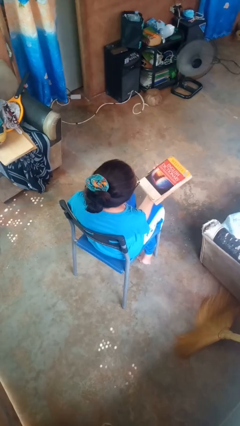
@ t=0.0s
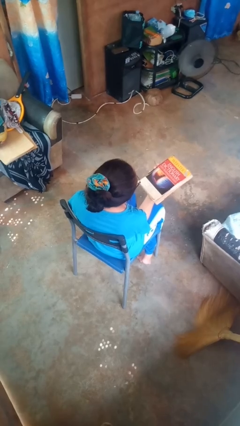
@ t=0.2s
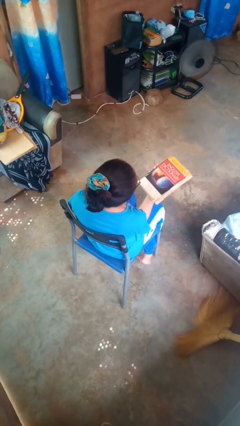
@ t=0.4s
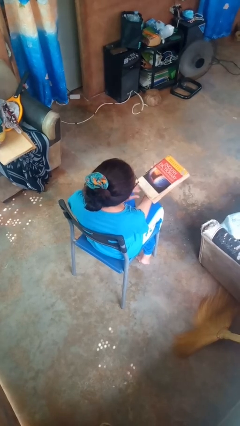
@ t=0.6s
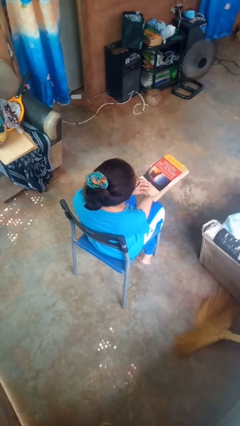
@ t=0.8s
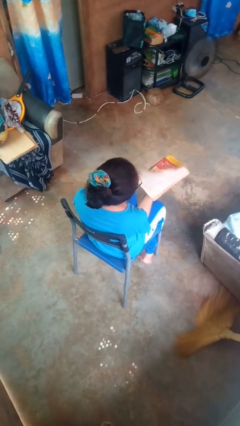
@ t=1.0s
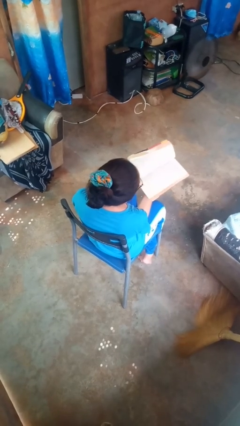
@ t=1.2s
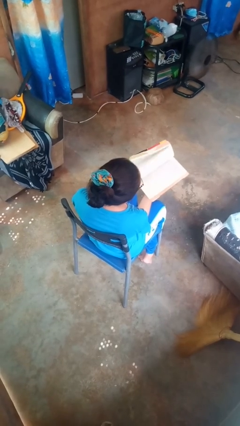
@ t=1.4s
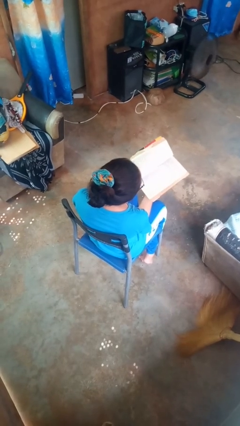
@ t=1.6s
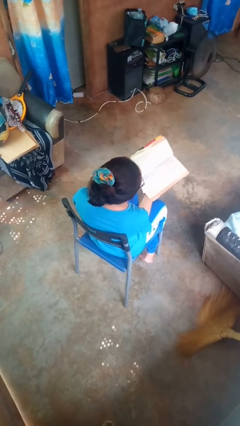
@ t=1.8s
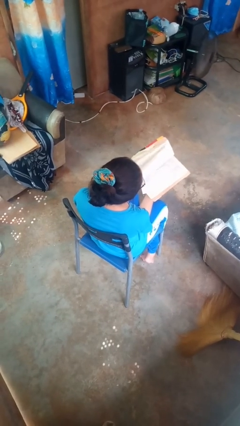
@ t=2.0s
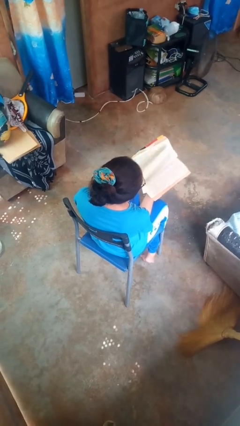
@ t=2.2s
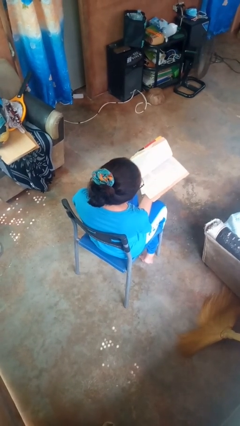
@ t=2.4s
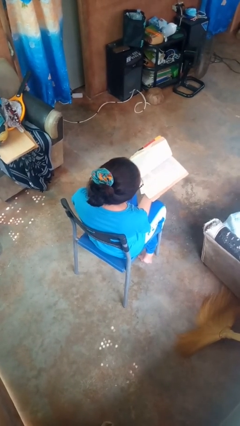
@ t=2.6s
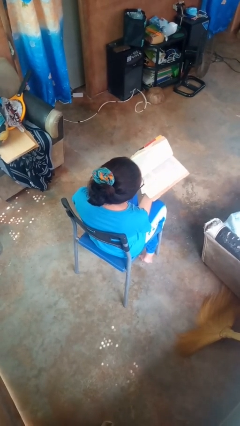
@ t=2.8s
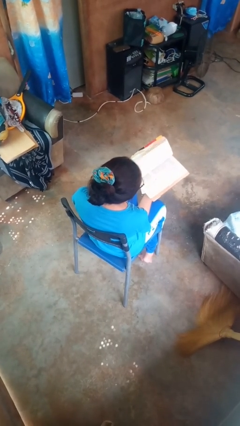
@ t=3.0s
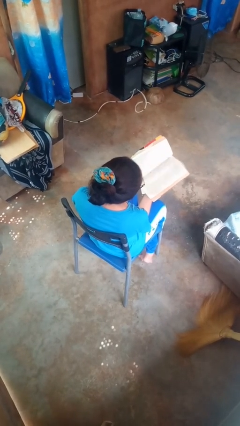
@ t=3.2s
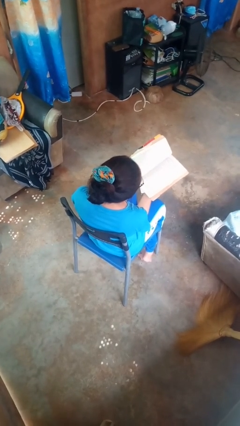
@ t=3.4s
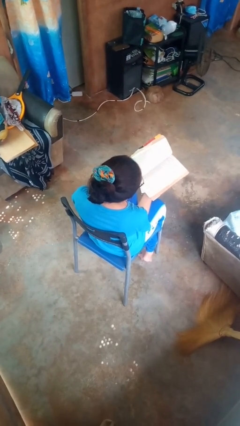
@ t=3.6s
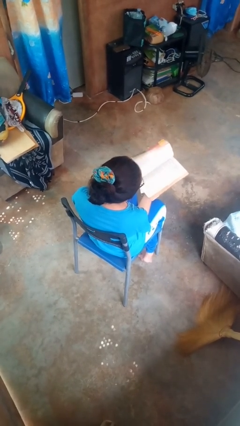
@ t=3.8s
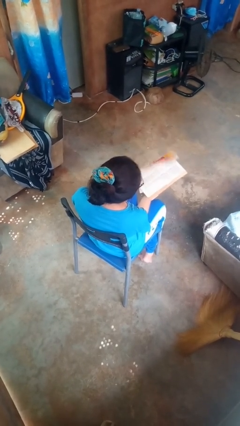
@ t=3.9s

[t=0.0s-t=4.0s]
person reads book

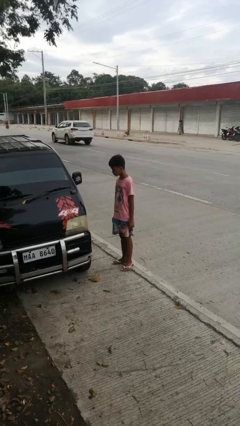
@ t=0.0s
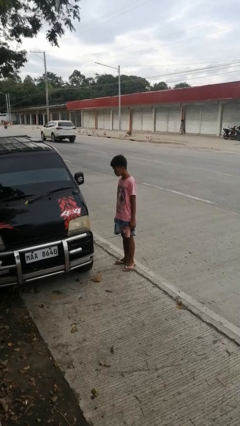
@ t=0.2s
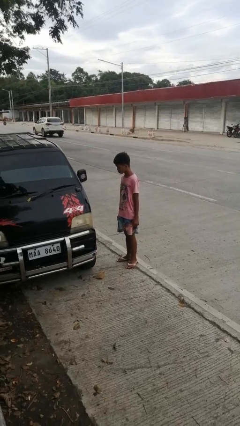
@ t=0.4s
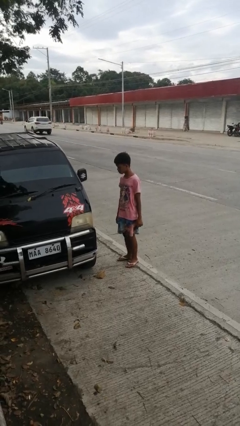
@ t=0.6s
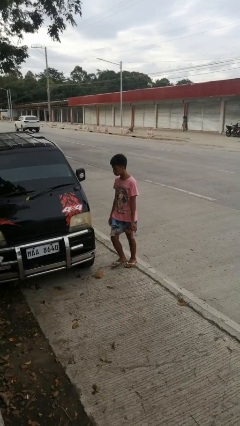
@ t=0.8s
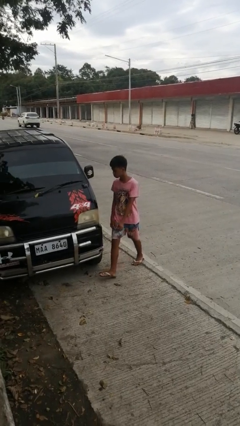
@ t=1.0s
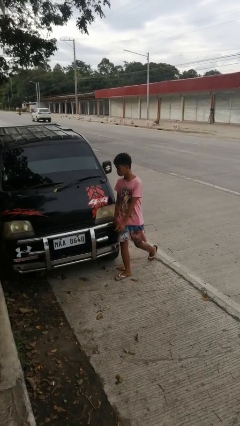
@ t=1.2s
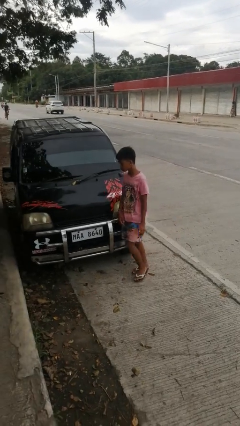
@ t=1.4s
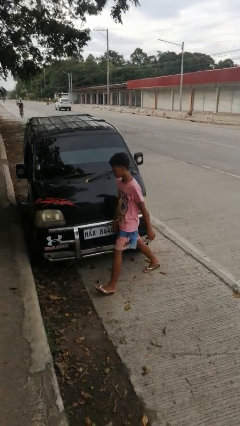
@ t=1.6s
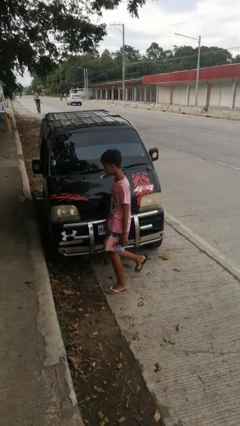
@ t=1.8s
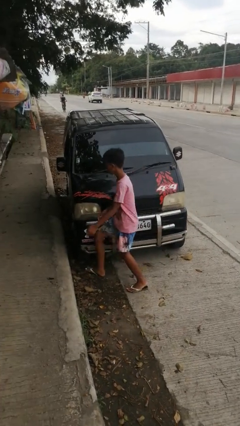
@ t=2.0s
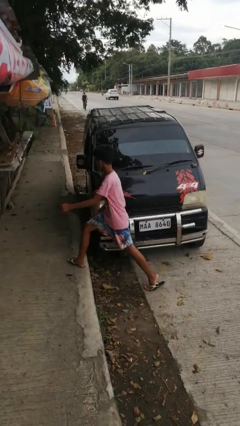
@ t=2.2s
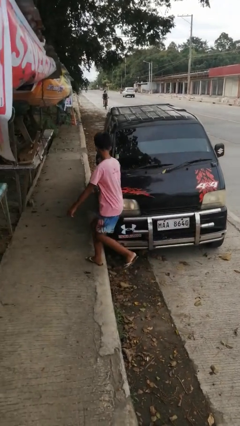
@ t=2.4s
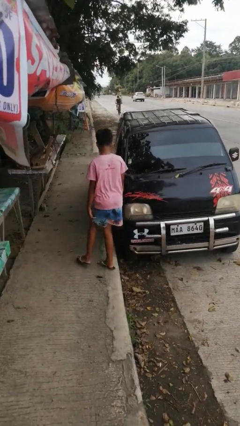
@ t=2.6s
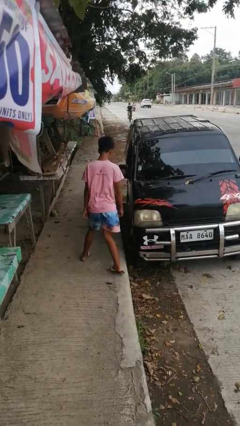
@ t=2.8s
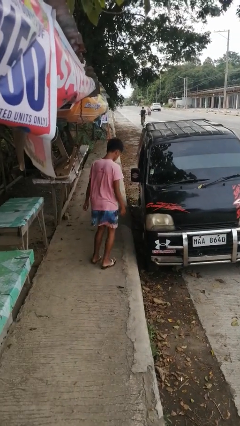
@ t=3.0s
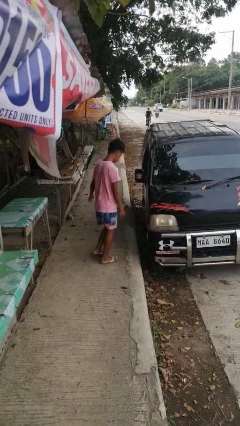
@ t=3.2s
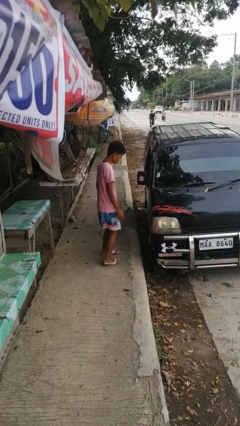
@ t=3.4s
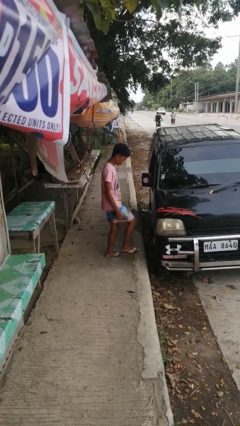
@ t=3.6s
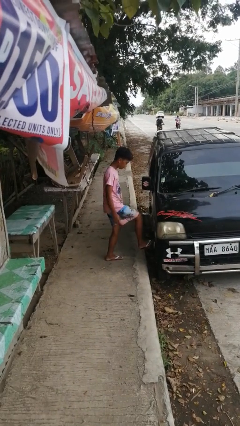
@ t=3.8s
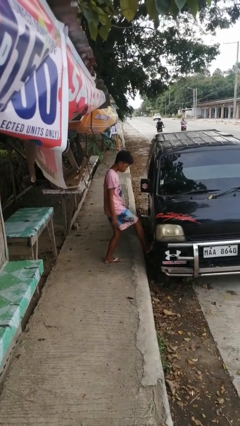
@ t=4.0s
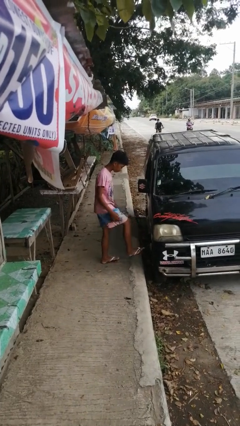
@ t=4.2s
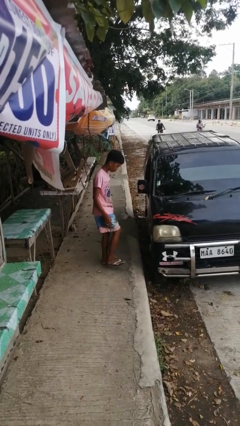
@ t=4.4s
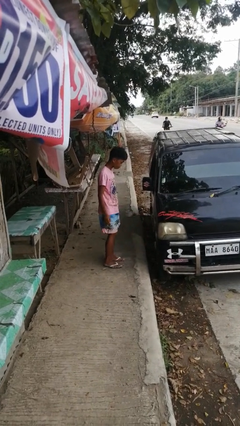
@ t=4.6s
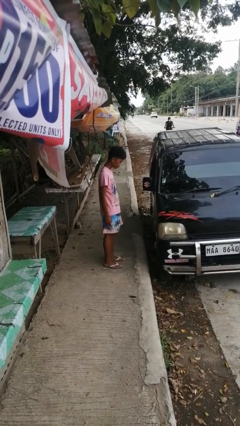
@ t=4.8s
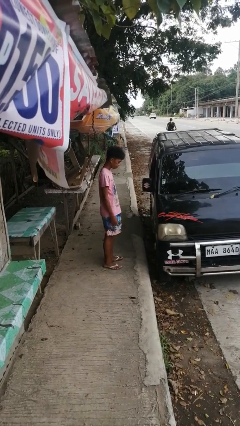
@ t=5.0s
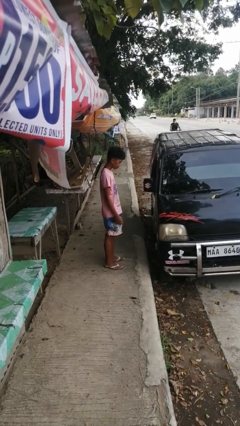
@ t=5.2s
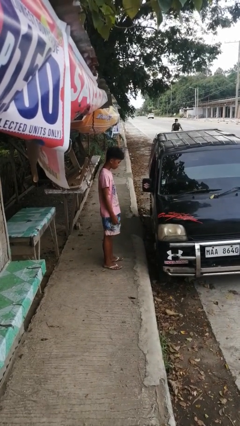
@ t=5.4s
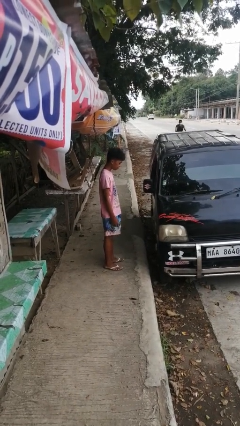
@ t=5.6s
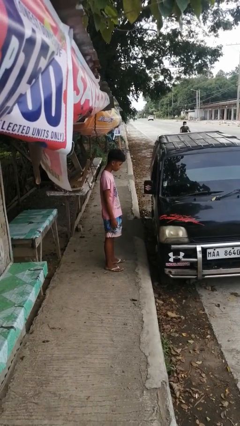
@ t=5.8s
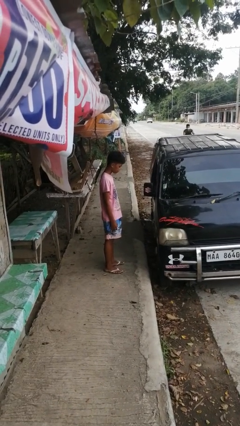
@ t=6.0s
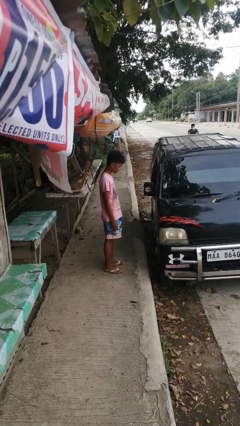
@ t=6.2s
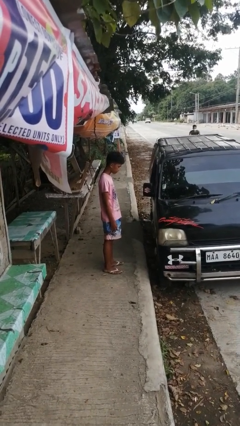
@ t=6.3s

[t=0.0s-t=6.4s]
person kicks car tires

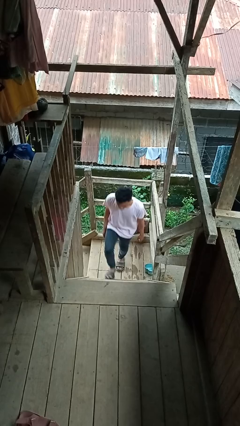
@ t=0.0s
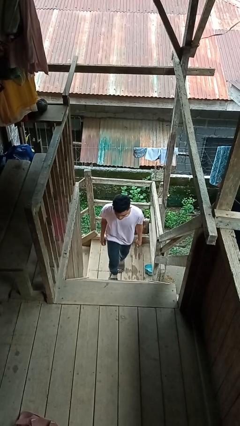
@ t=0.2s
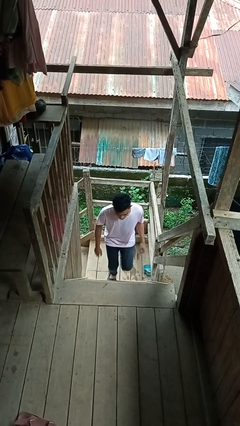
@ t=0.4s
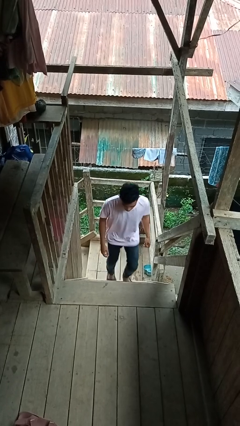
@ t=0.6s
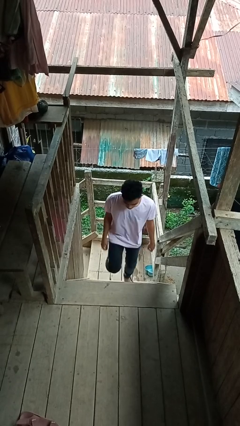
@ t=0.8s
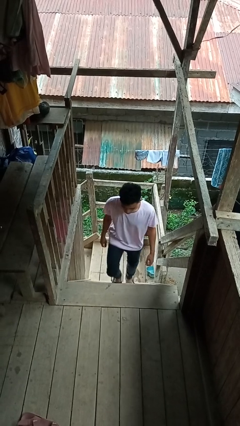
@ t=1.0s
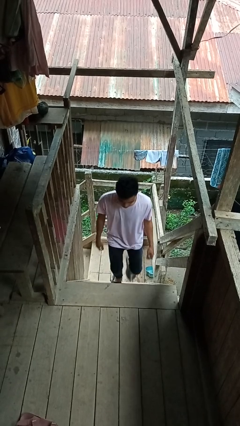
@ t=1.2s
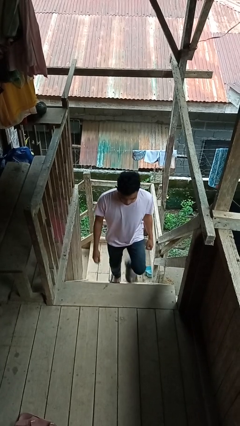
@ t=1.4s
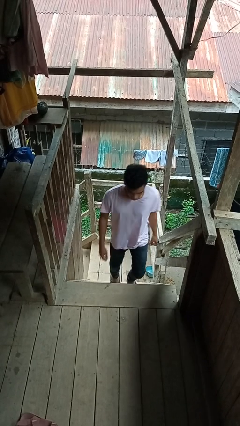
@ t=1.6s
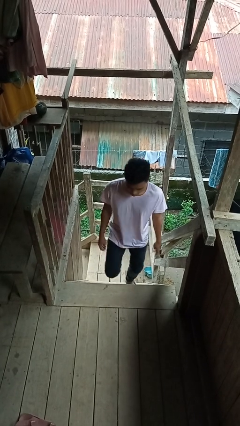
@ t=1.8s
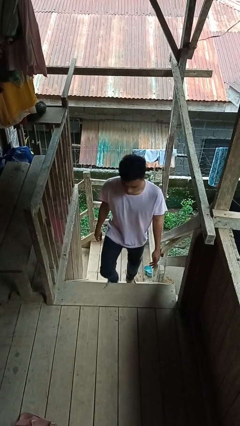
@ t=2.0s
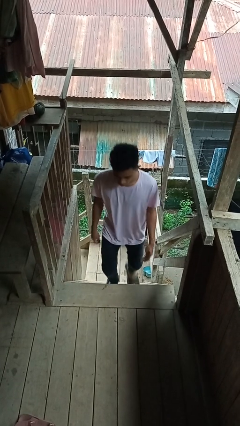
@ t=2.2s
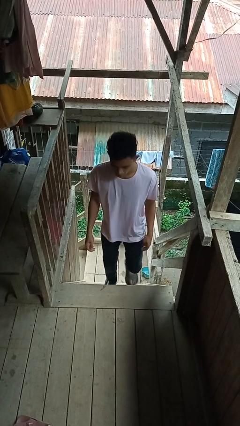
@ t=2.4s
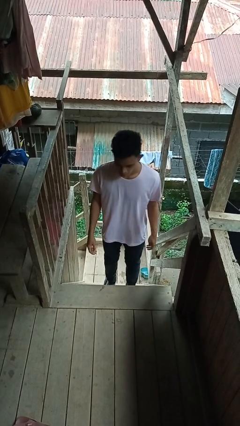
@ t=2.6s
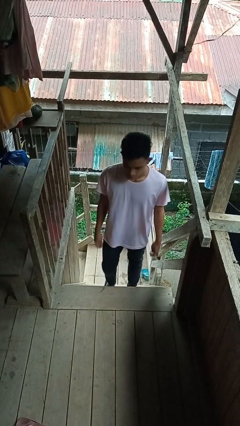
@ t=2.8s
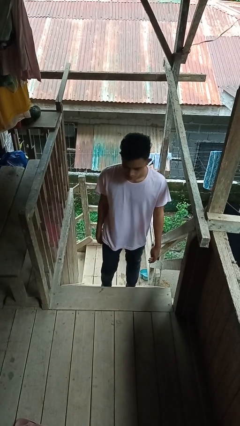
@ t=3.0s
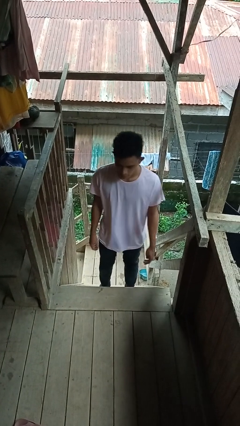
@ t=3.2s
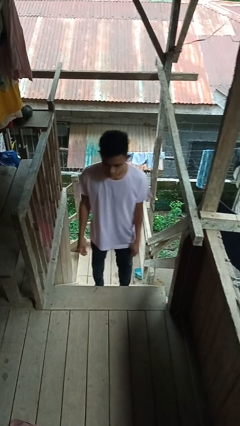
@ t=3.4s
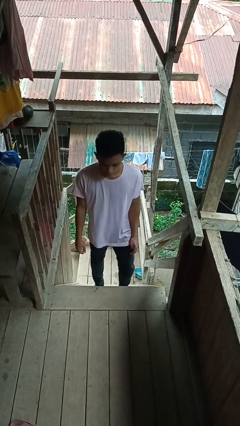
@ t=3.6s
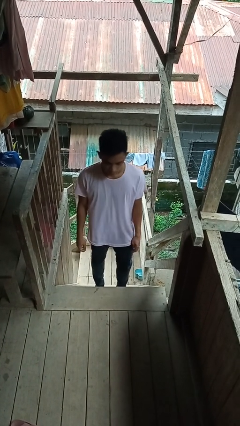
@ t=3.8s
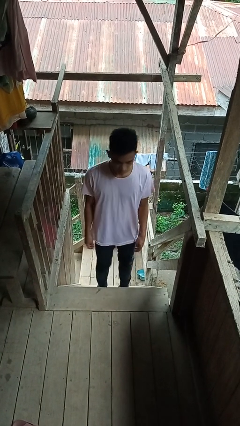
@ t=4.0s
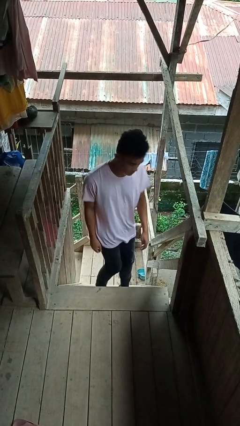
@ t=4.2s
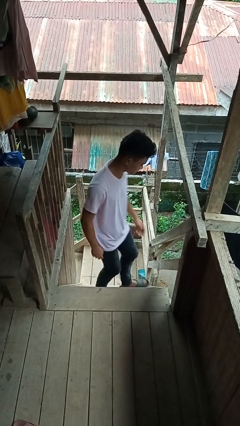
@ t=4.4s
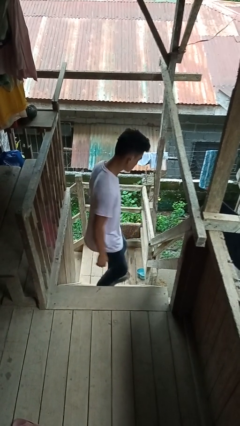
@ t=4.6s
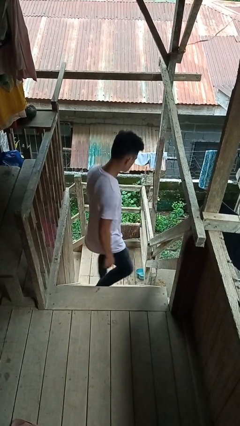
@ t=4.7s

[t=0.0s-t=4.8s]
person climbs up stairs

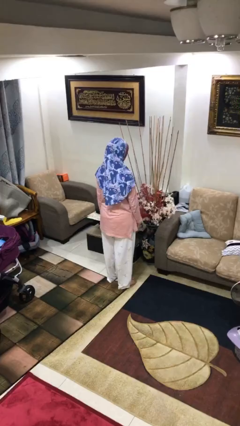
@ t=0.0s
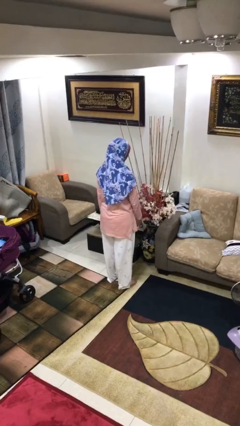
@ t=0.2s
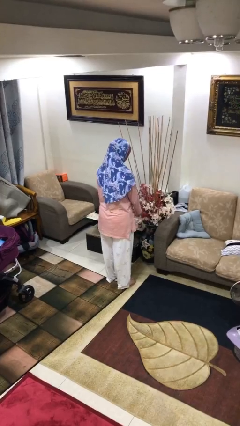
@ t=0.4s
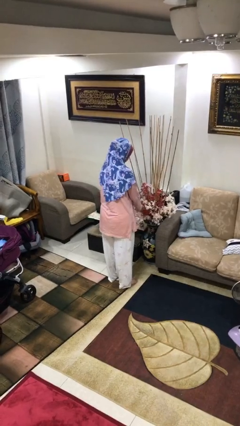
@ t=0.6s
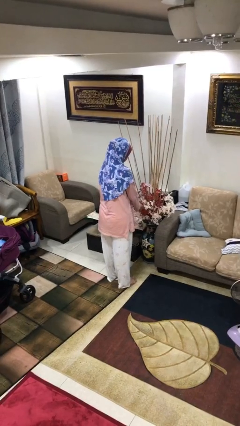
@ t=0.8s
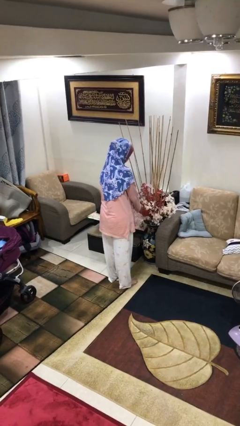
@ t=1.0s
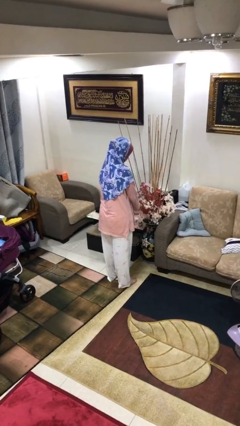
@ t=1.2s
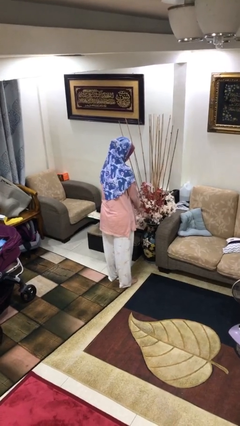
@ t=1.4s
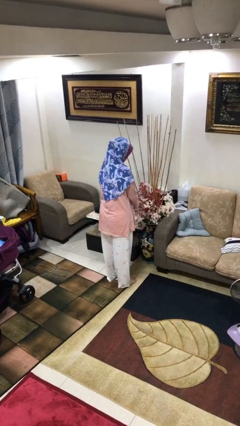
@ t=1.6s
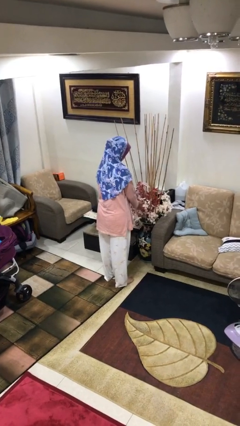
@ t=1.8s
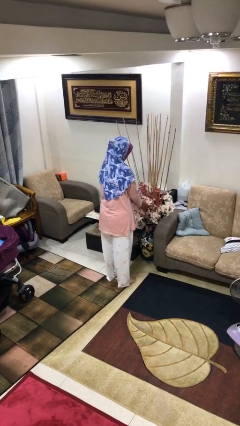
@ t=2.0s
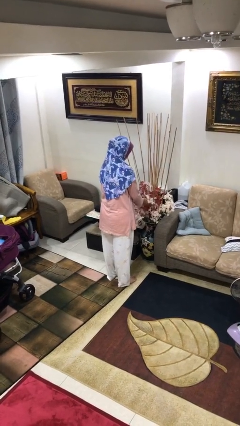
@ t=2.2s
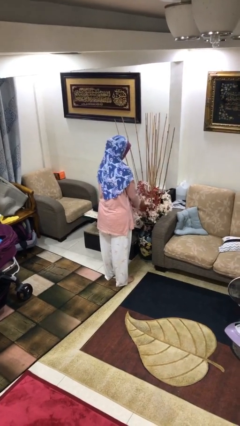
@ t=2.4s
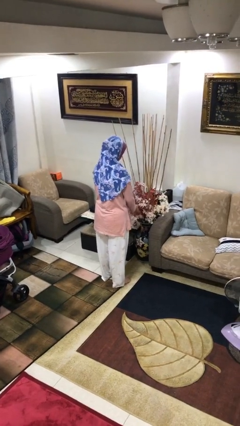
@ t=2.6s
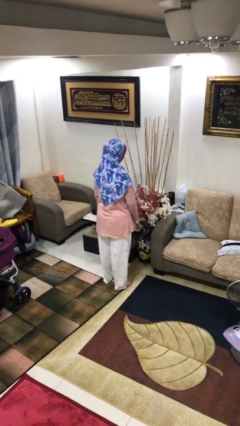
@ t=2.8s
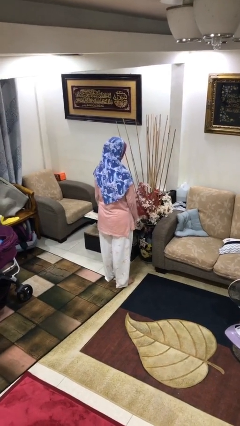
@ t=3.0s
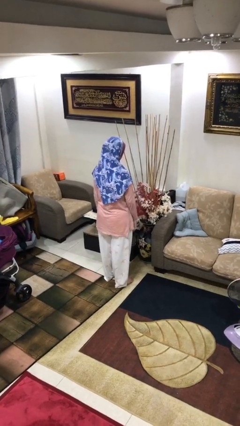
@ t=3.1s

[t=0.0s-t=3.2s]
person arranges flowers in vase
